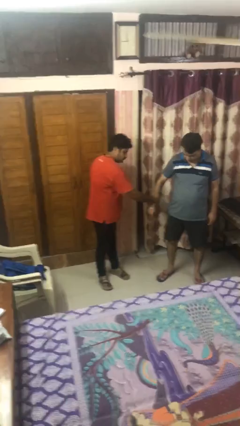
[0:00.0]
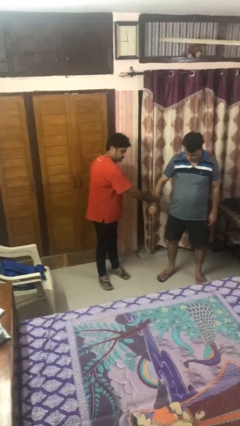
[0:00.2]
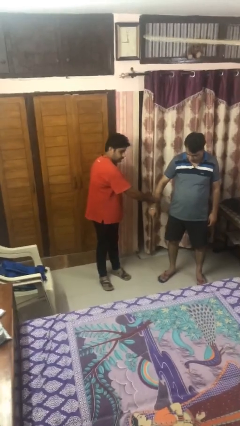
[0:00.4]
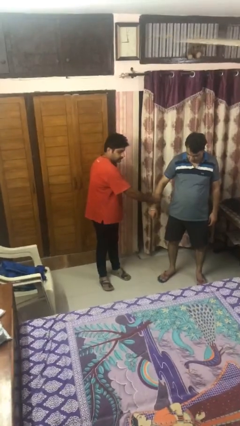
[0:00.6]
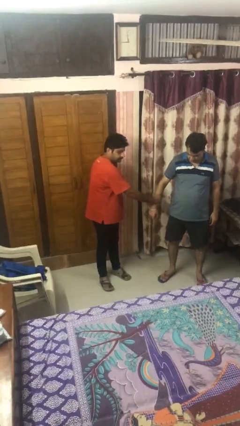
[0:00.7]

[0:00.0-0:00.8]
person grabs person by forearm

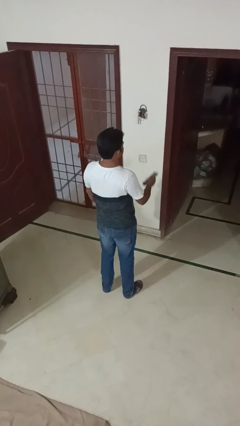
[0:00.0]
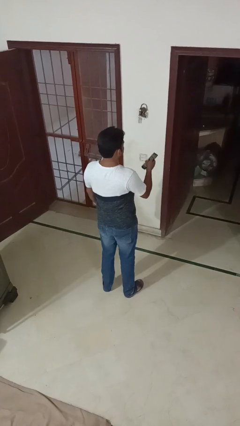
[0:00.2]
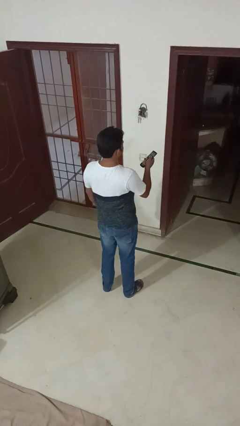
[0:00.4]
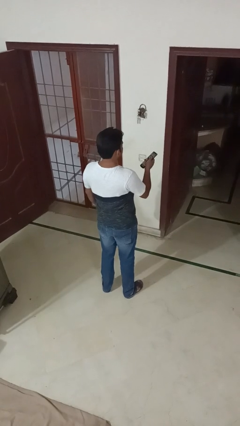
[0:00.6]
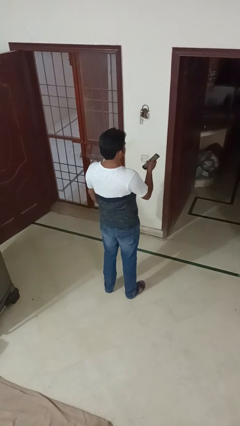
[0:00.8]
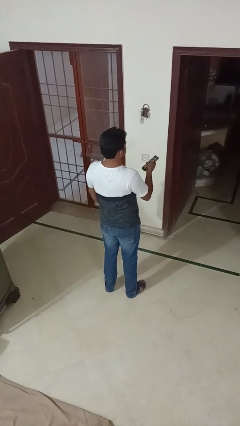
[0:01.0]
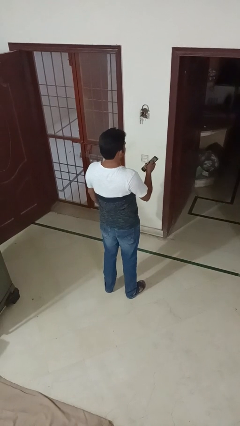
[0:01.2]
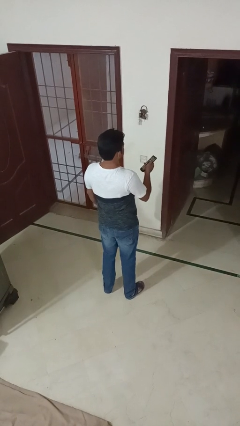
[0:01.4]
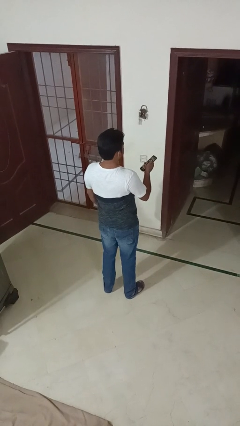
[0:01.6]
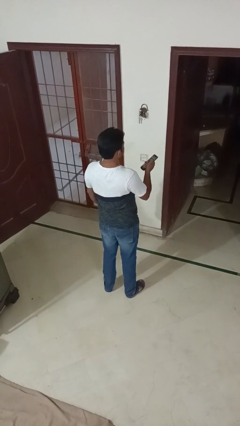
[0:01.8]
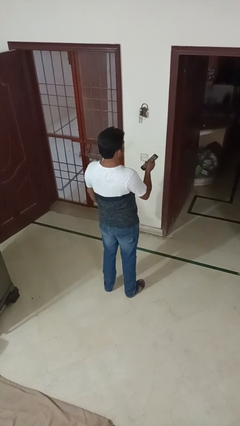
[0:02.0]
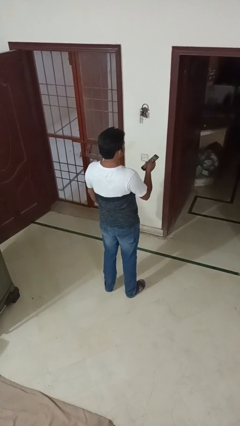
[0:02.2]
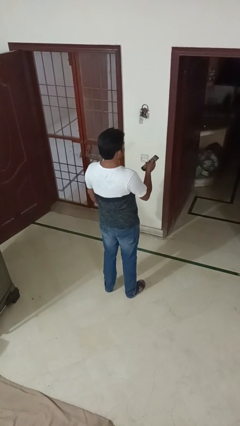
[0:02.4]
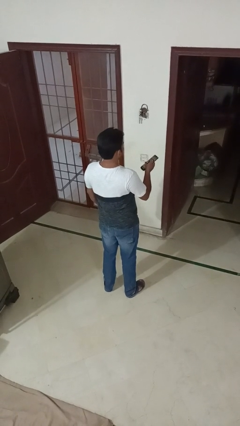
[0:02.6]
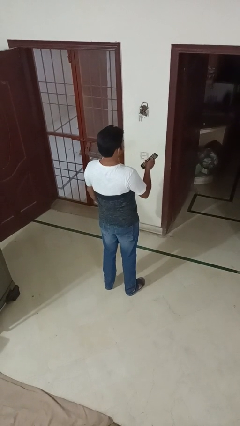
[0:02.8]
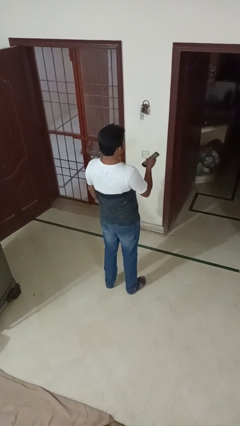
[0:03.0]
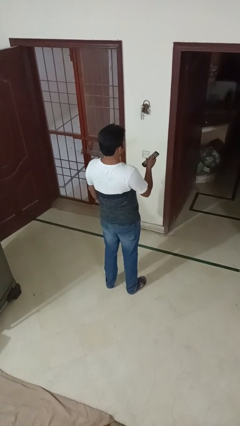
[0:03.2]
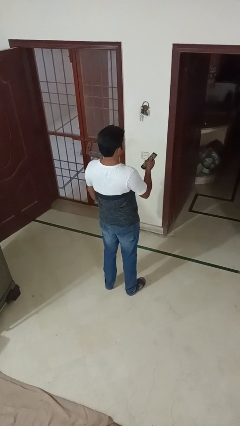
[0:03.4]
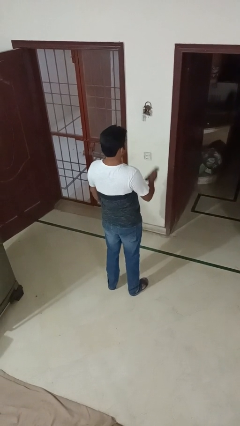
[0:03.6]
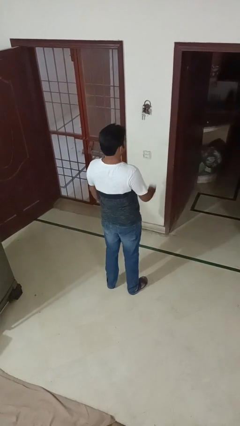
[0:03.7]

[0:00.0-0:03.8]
person uses television remote

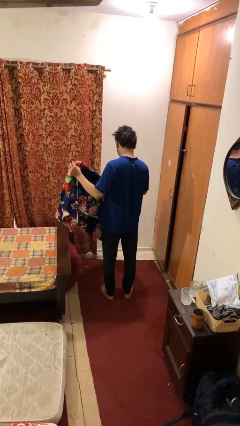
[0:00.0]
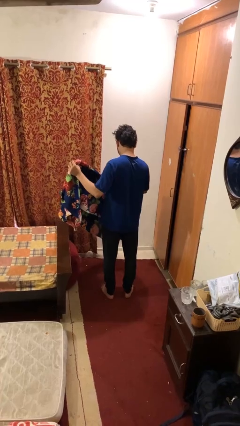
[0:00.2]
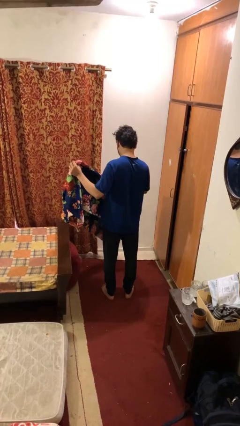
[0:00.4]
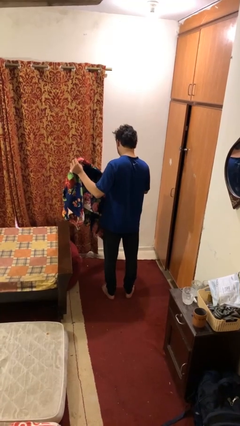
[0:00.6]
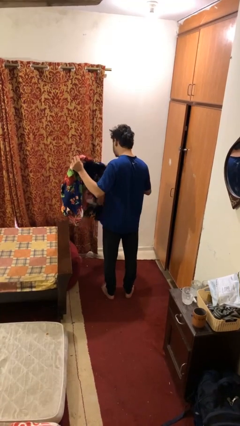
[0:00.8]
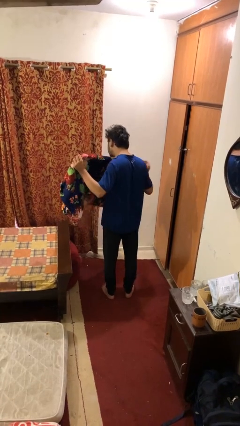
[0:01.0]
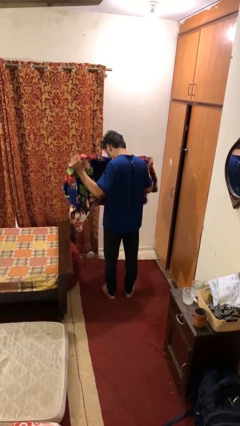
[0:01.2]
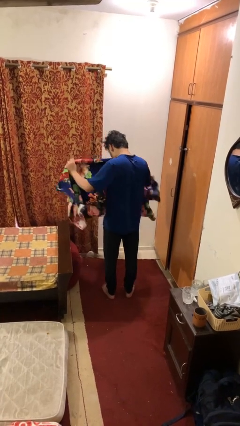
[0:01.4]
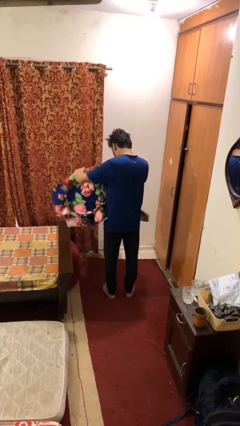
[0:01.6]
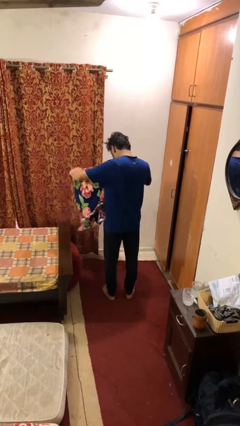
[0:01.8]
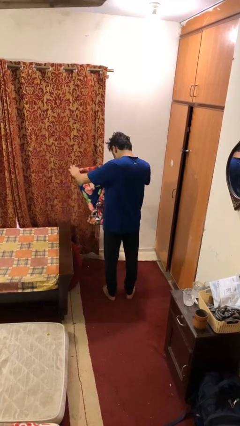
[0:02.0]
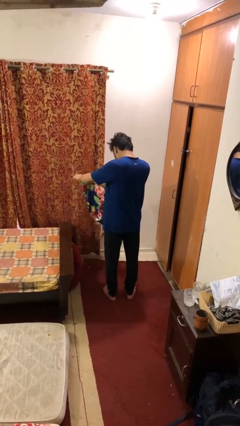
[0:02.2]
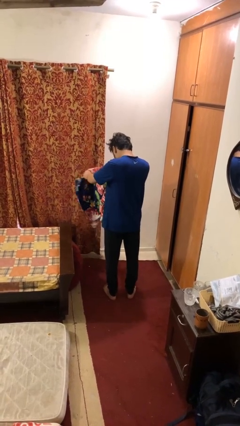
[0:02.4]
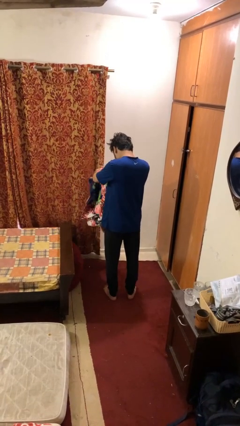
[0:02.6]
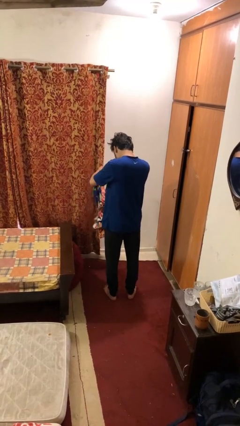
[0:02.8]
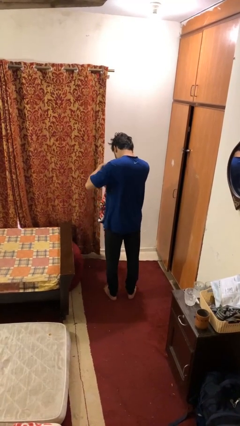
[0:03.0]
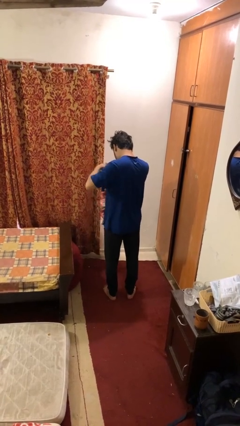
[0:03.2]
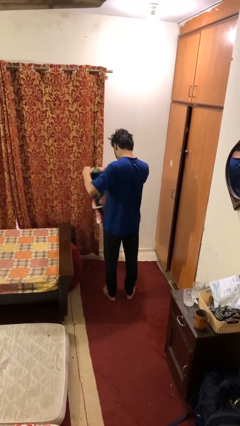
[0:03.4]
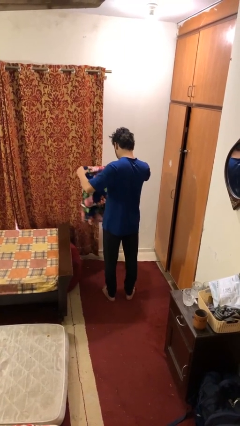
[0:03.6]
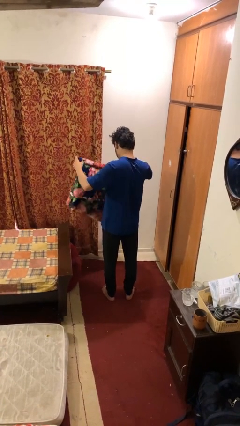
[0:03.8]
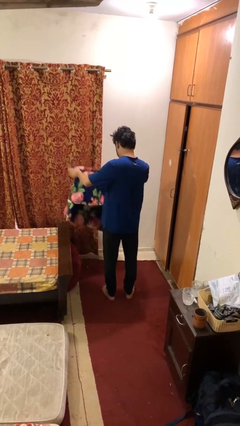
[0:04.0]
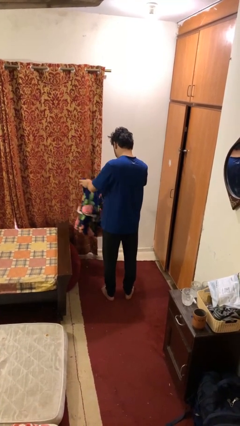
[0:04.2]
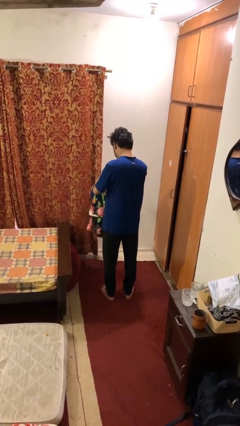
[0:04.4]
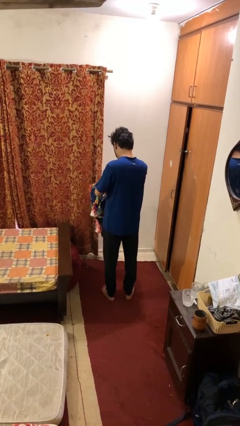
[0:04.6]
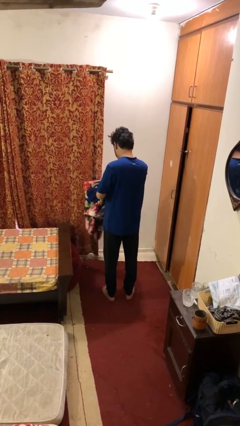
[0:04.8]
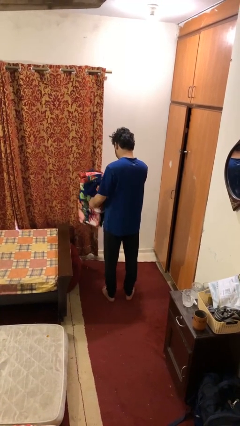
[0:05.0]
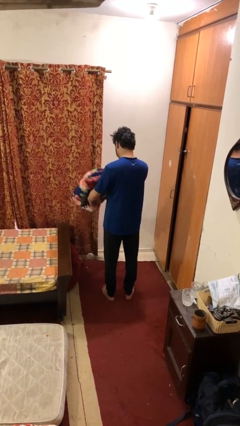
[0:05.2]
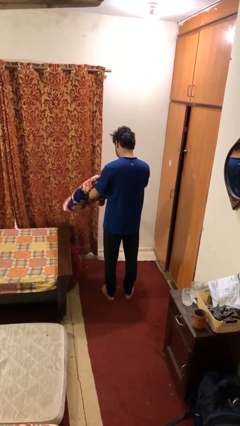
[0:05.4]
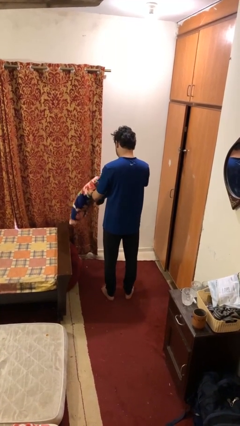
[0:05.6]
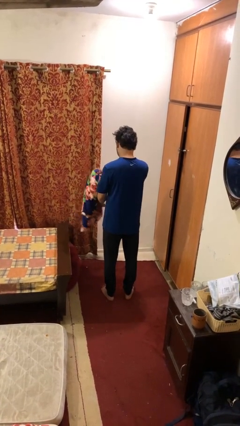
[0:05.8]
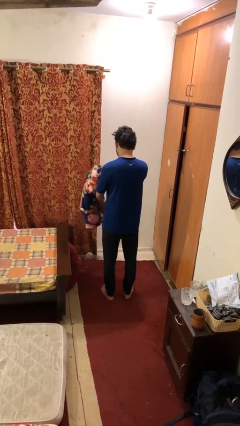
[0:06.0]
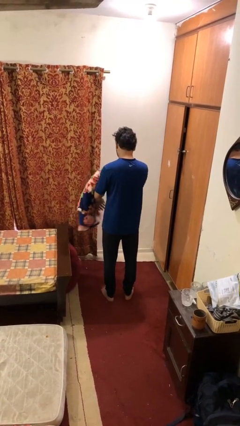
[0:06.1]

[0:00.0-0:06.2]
person folds blanket

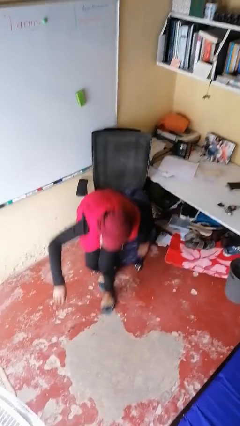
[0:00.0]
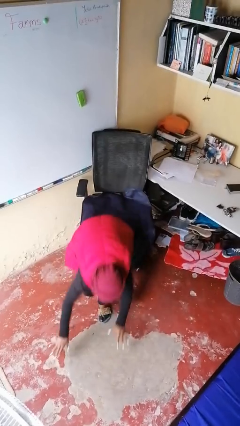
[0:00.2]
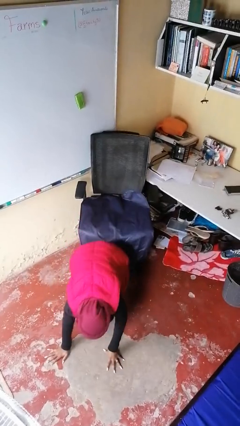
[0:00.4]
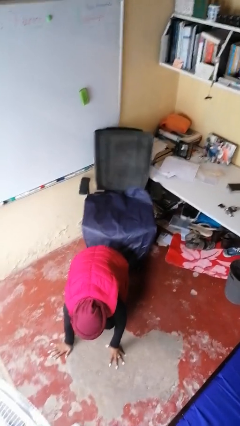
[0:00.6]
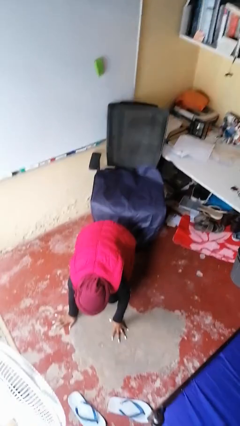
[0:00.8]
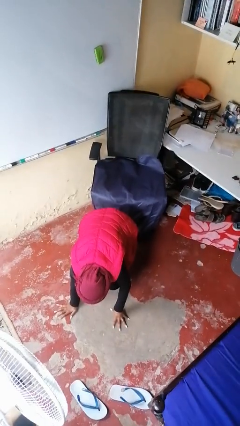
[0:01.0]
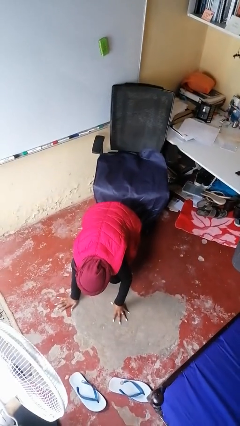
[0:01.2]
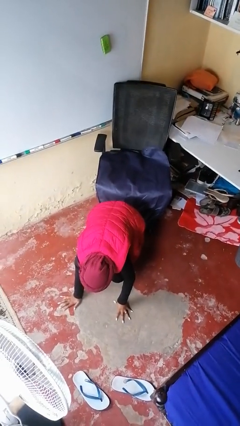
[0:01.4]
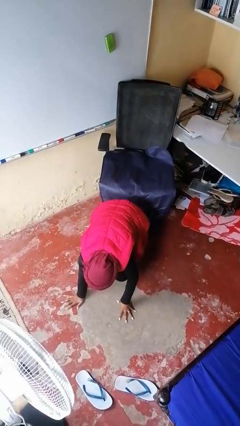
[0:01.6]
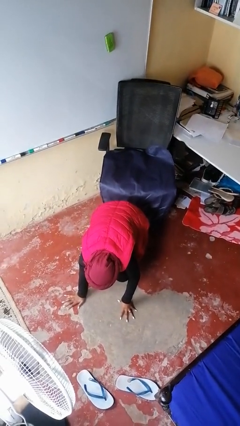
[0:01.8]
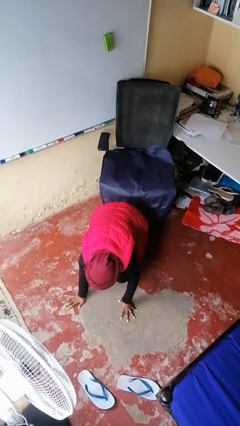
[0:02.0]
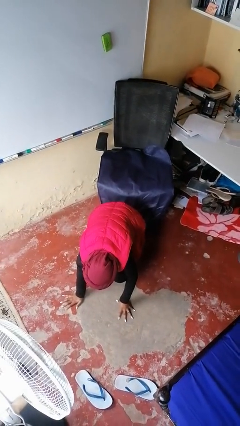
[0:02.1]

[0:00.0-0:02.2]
person falls from chair

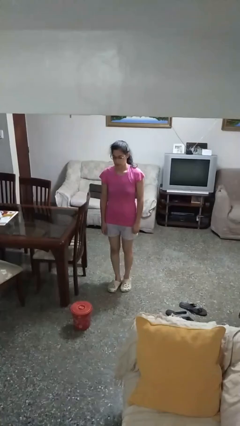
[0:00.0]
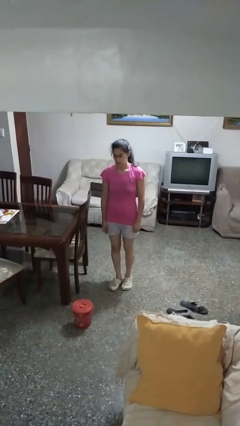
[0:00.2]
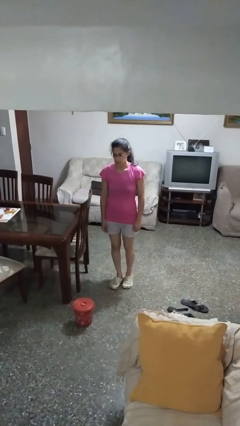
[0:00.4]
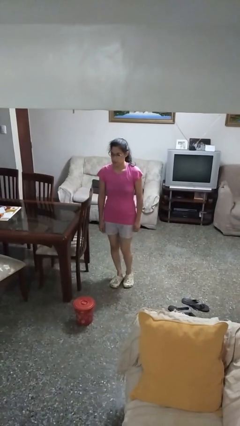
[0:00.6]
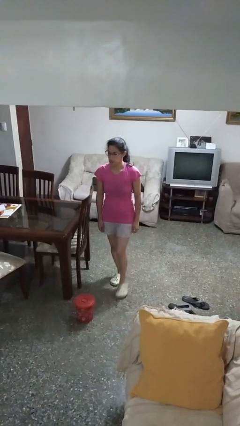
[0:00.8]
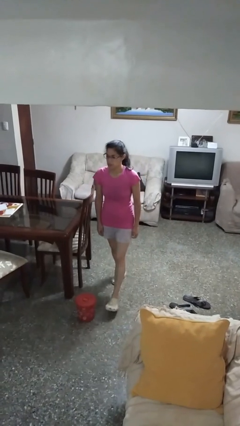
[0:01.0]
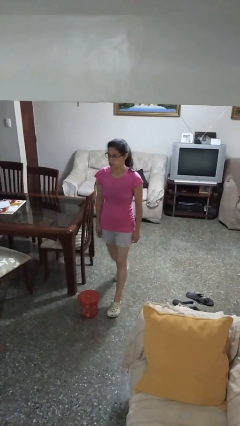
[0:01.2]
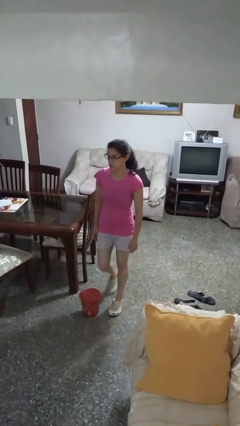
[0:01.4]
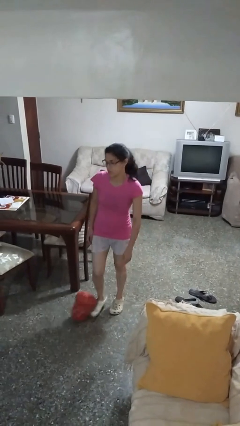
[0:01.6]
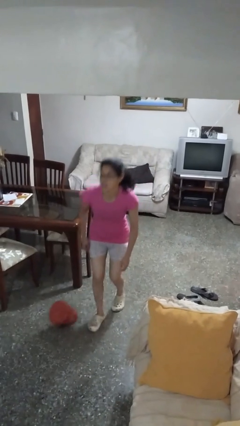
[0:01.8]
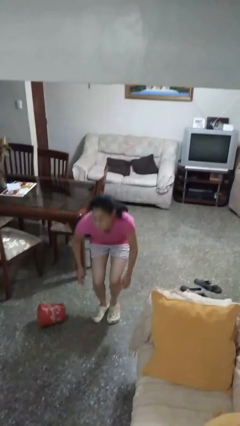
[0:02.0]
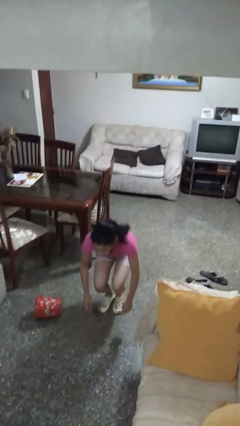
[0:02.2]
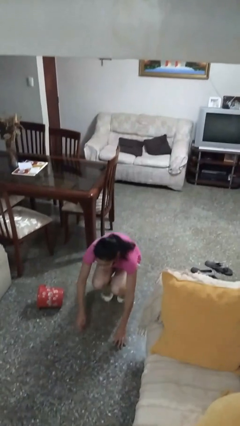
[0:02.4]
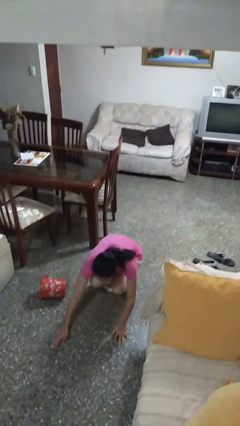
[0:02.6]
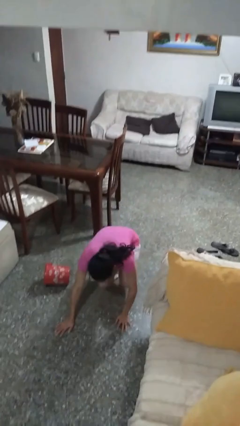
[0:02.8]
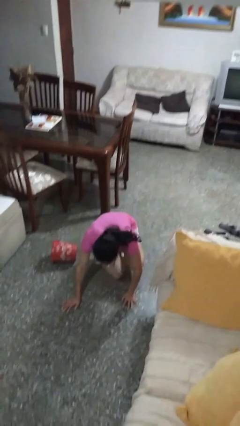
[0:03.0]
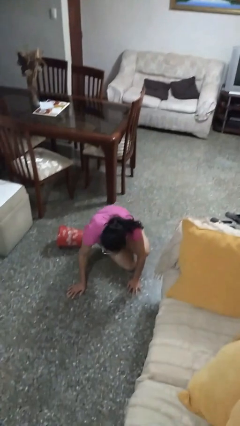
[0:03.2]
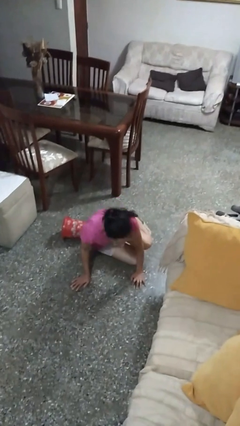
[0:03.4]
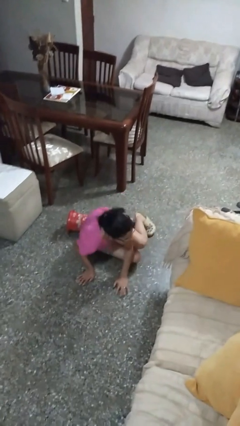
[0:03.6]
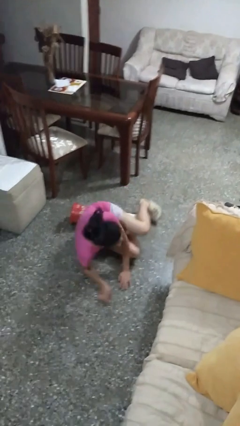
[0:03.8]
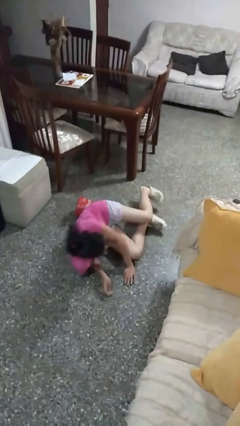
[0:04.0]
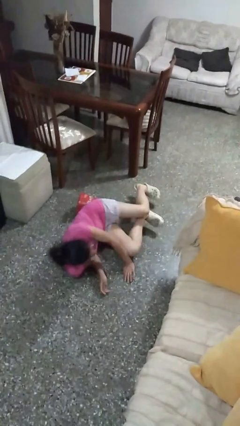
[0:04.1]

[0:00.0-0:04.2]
person trips on object on floor

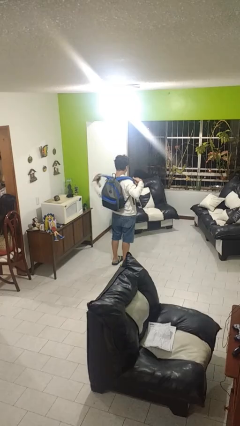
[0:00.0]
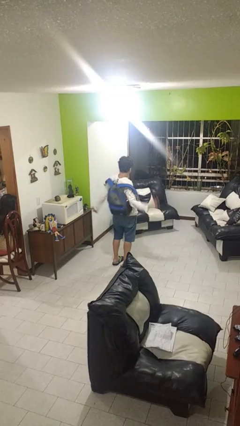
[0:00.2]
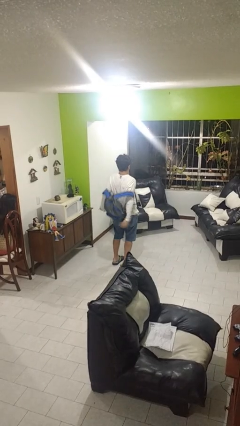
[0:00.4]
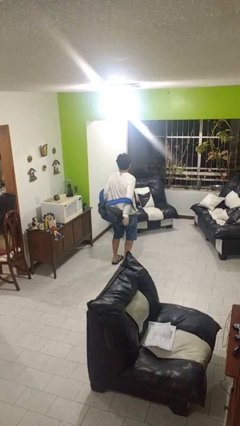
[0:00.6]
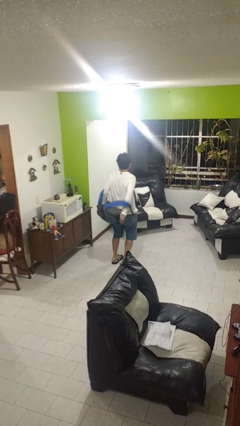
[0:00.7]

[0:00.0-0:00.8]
person takes off backpack
